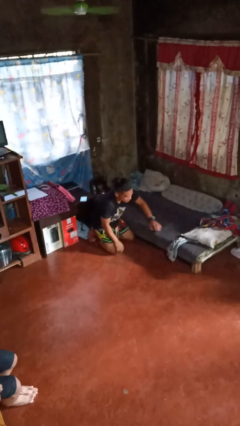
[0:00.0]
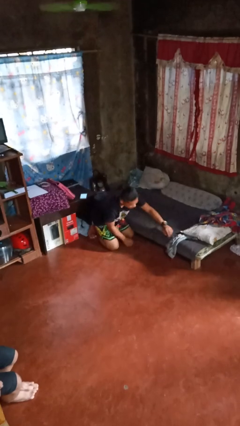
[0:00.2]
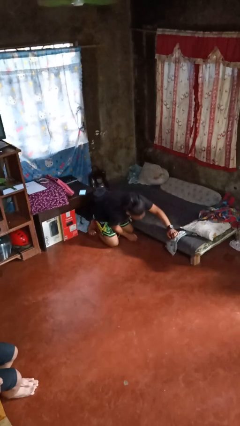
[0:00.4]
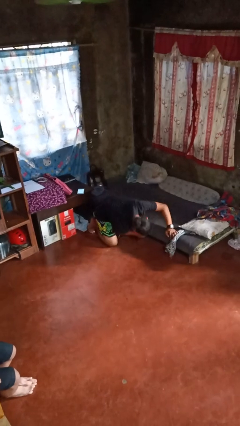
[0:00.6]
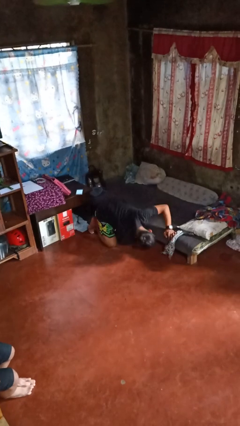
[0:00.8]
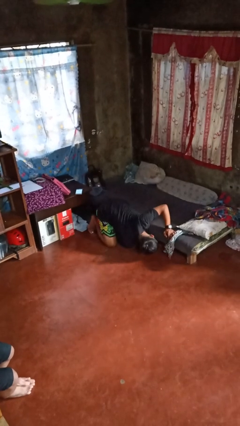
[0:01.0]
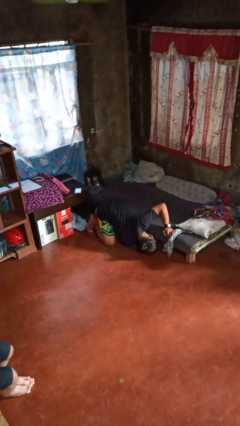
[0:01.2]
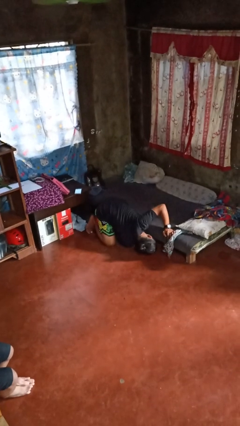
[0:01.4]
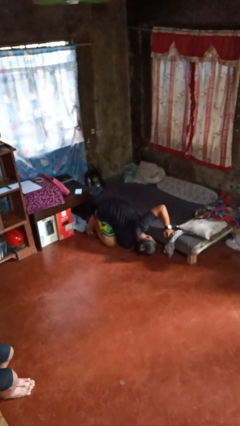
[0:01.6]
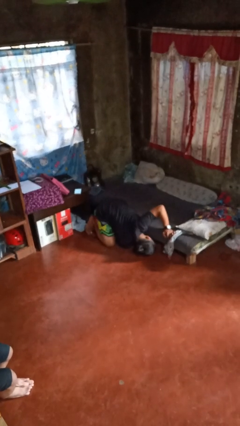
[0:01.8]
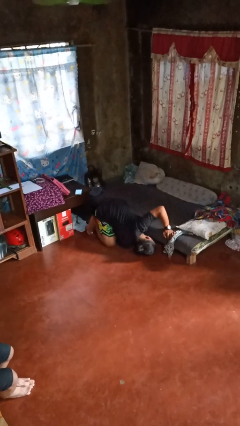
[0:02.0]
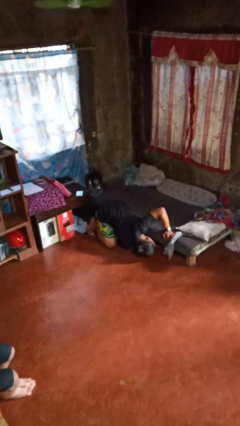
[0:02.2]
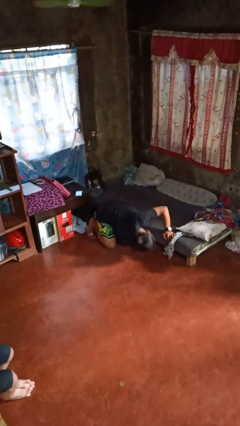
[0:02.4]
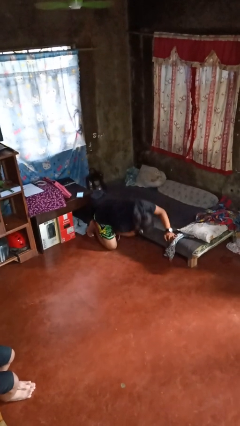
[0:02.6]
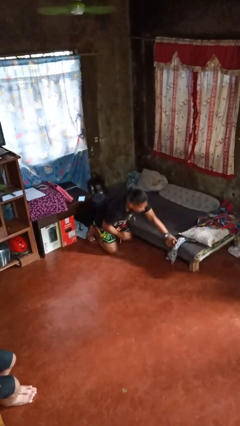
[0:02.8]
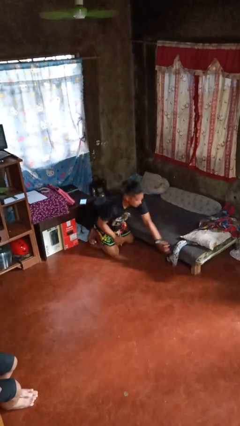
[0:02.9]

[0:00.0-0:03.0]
person searches under bed

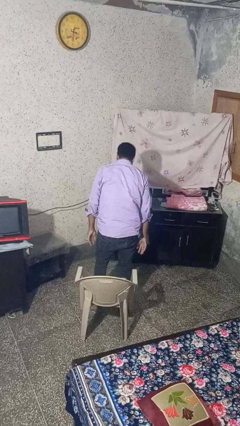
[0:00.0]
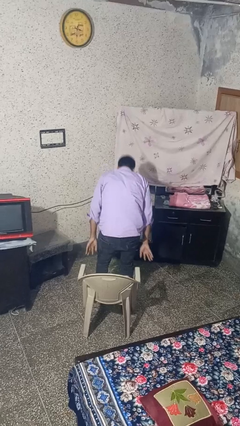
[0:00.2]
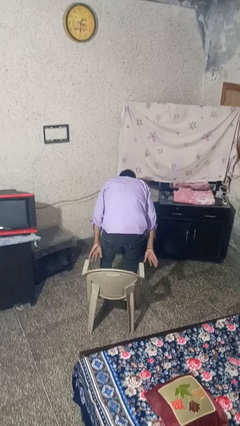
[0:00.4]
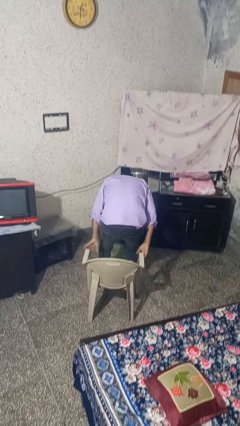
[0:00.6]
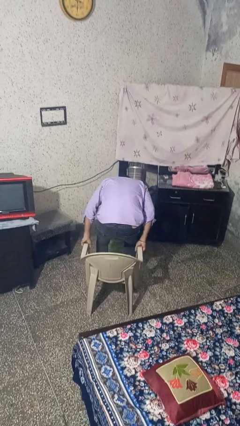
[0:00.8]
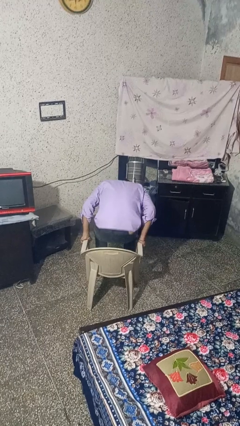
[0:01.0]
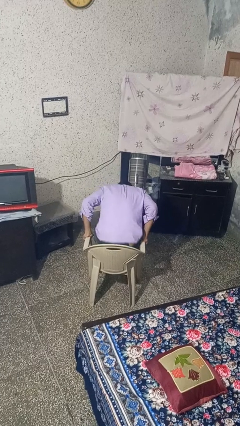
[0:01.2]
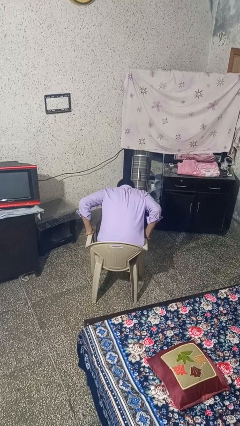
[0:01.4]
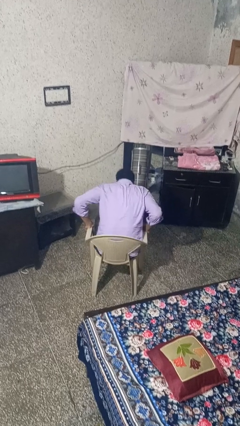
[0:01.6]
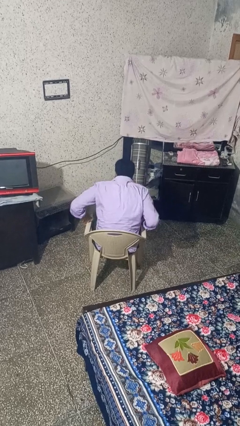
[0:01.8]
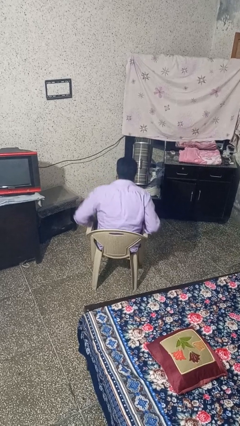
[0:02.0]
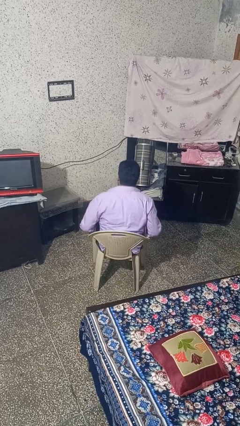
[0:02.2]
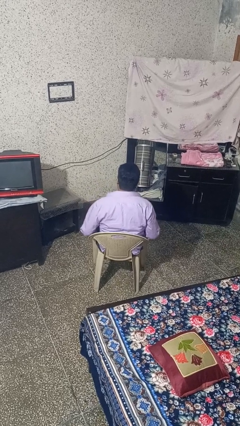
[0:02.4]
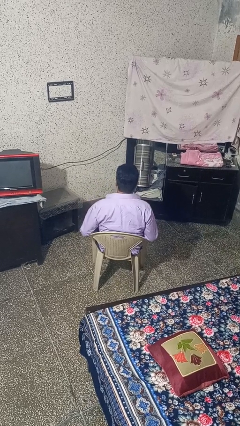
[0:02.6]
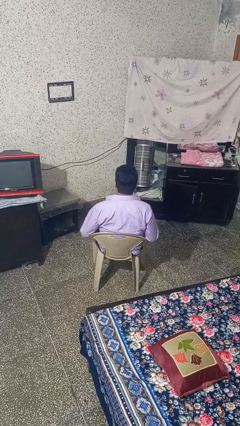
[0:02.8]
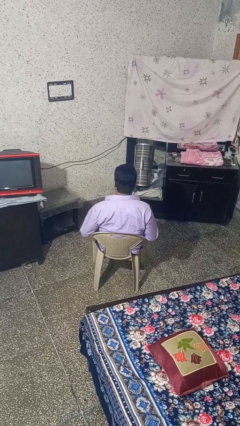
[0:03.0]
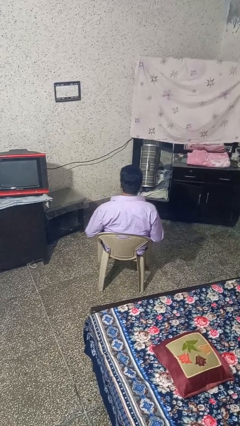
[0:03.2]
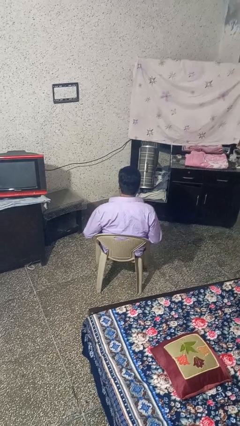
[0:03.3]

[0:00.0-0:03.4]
person sits down

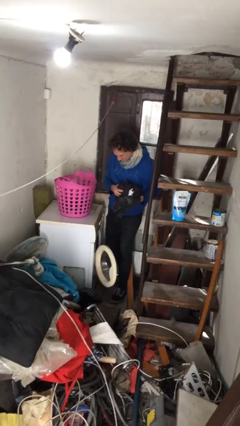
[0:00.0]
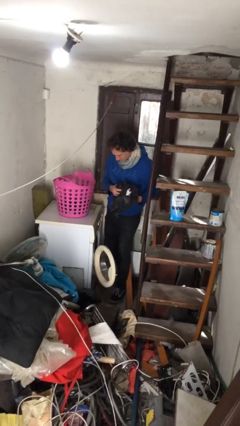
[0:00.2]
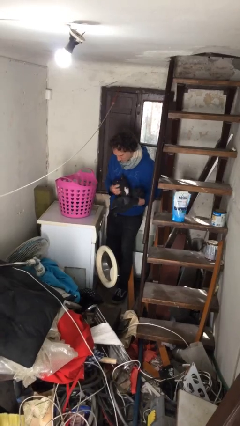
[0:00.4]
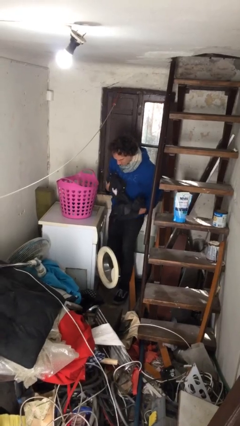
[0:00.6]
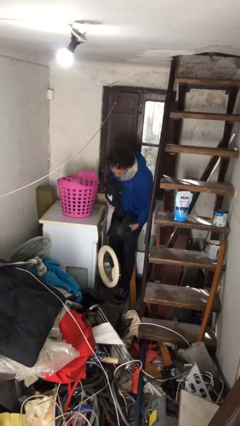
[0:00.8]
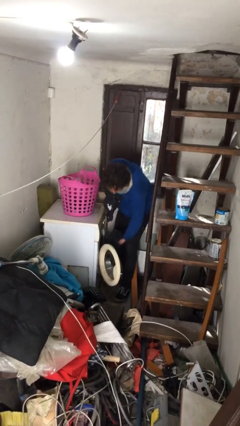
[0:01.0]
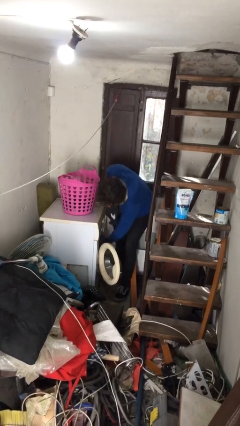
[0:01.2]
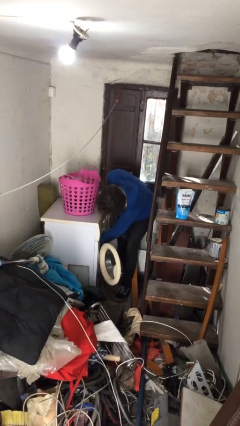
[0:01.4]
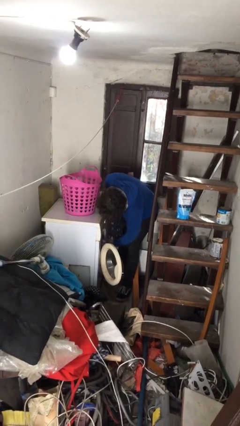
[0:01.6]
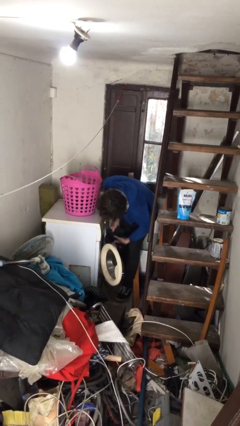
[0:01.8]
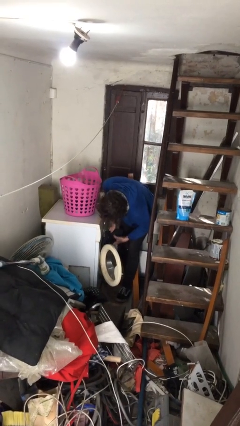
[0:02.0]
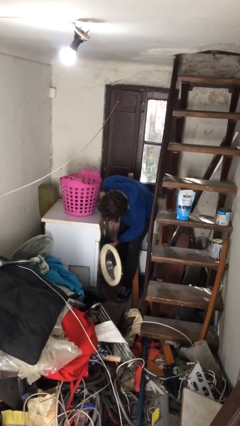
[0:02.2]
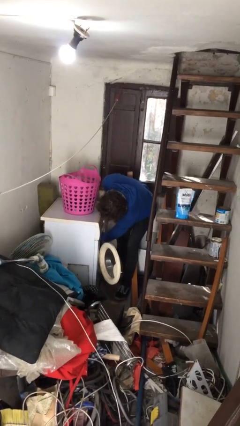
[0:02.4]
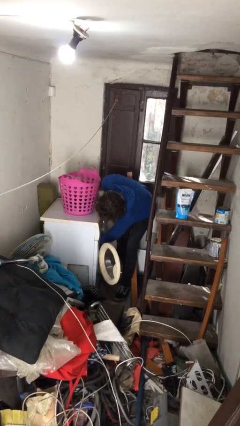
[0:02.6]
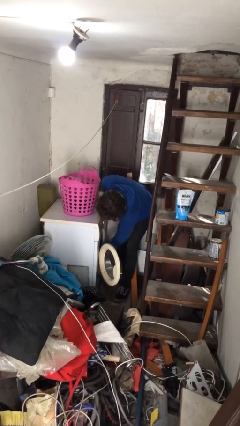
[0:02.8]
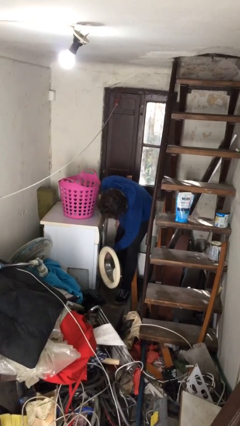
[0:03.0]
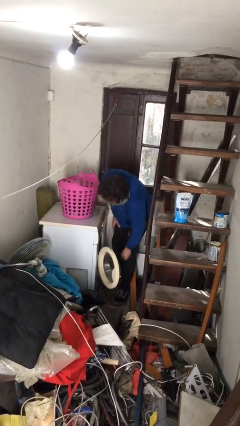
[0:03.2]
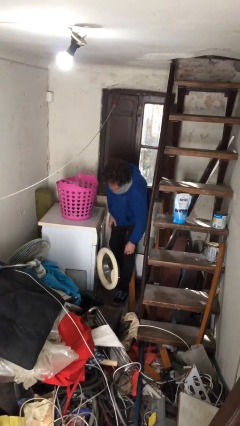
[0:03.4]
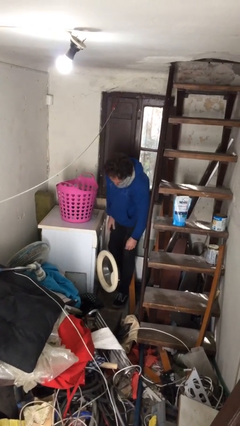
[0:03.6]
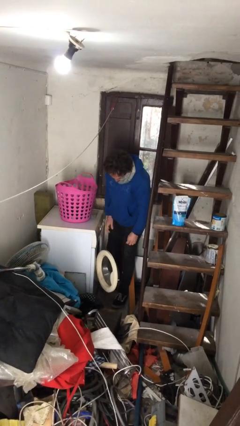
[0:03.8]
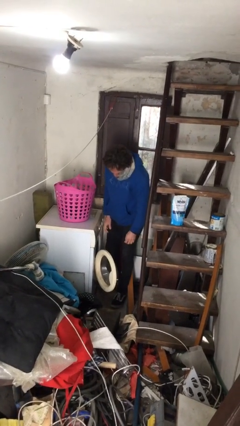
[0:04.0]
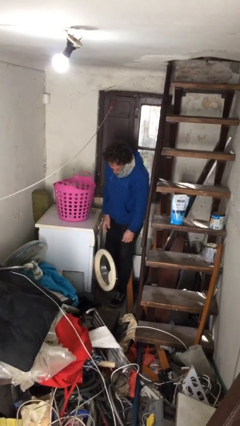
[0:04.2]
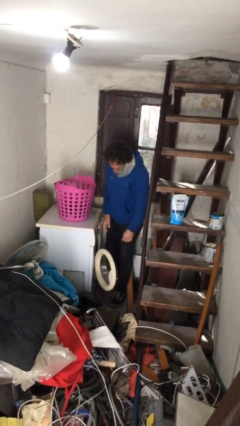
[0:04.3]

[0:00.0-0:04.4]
person loads clotheswasher

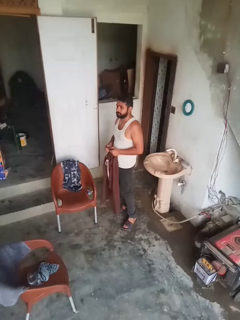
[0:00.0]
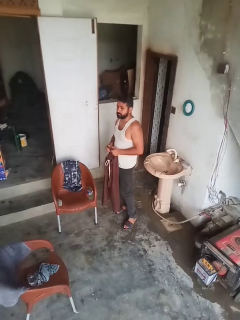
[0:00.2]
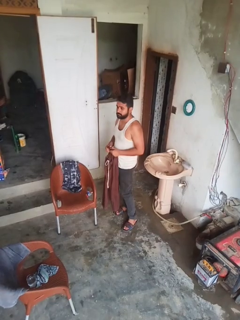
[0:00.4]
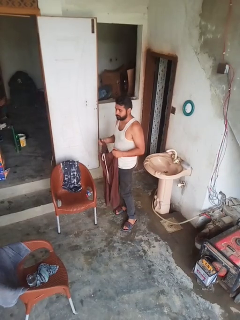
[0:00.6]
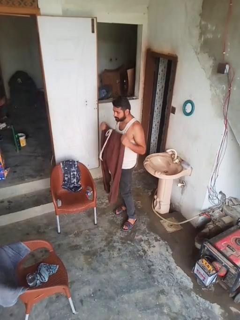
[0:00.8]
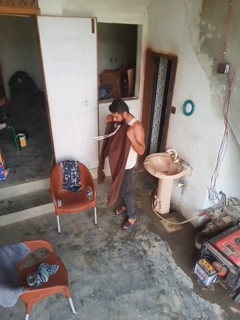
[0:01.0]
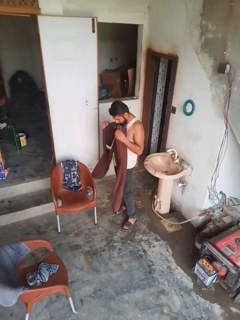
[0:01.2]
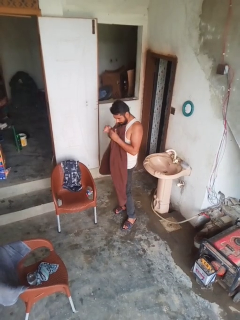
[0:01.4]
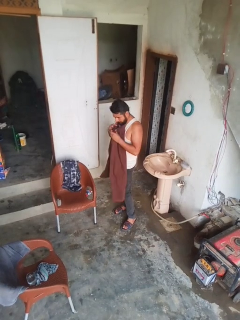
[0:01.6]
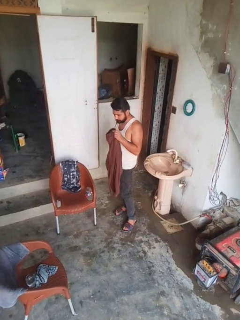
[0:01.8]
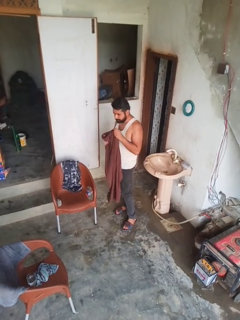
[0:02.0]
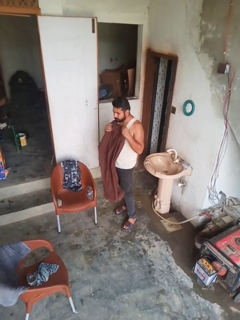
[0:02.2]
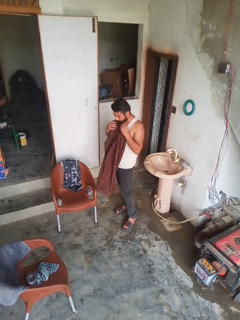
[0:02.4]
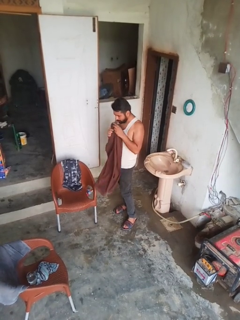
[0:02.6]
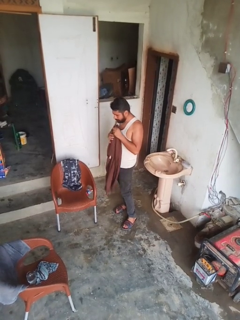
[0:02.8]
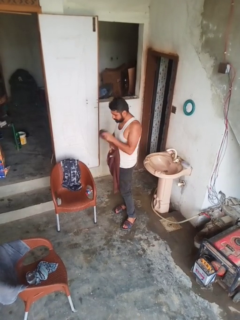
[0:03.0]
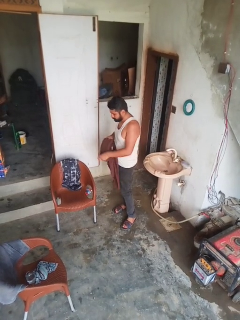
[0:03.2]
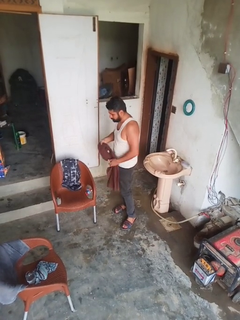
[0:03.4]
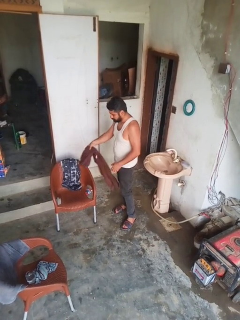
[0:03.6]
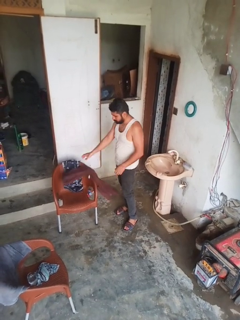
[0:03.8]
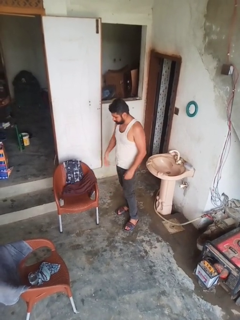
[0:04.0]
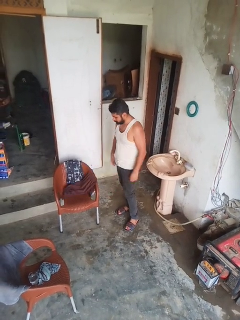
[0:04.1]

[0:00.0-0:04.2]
person folds pants

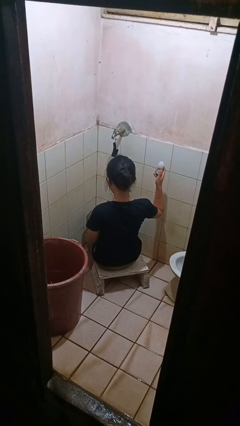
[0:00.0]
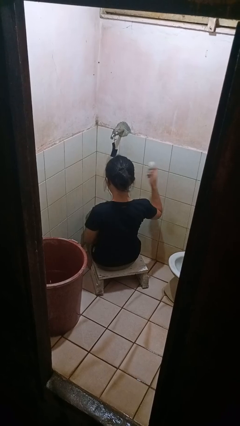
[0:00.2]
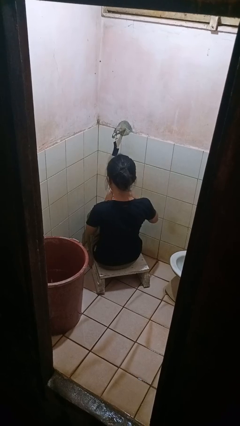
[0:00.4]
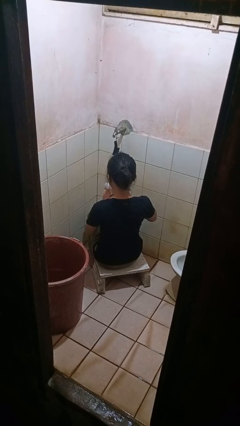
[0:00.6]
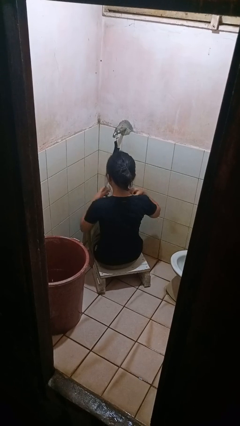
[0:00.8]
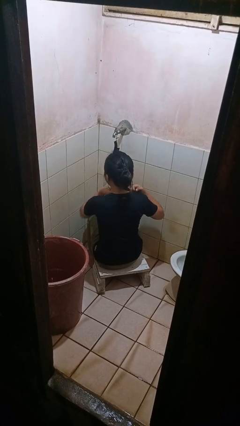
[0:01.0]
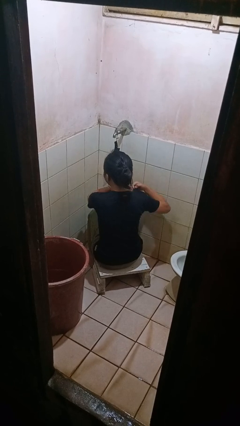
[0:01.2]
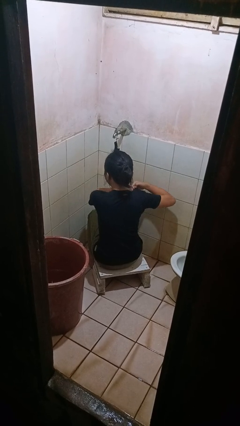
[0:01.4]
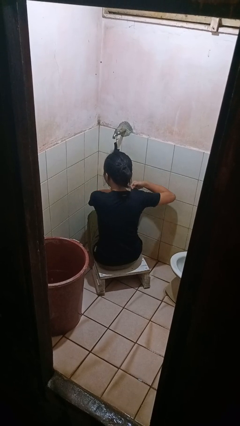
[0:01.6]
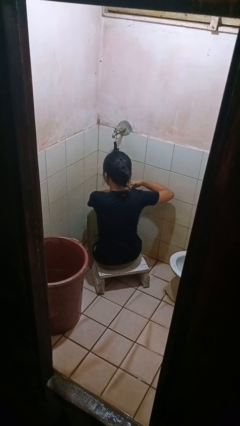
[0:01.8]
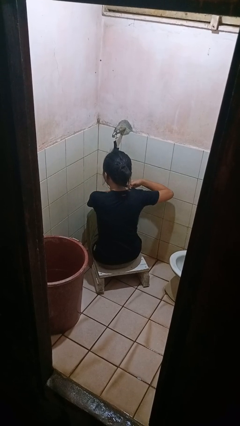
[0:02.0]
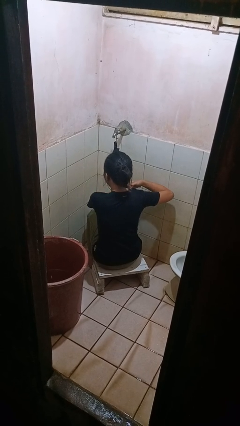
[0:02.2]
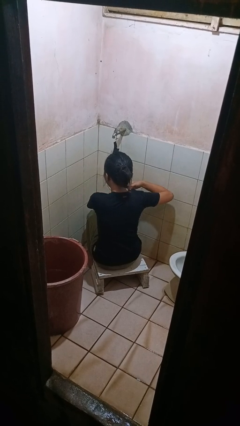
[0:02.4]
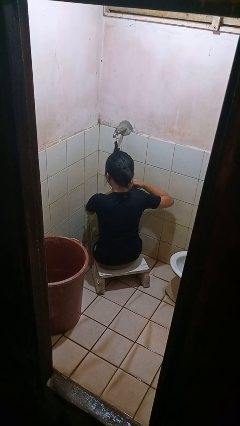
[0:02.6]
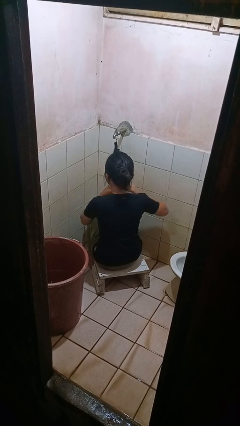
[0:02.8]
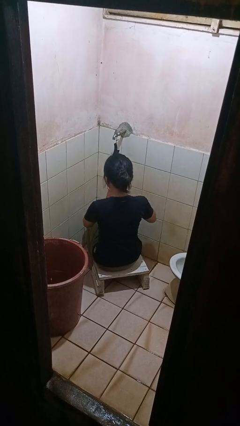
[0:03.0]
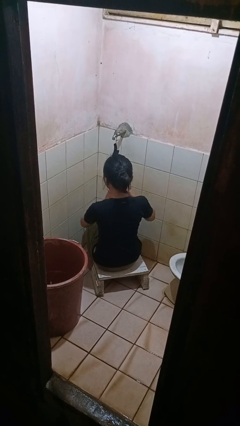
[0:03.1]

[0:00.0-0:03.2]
person applies deodorant

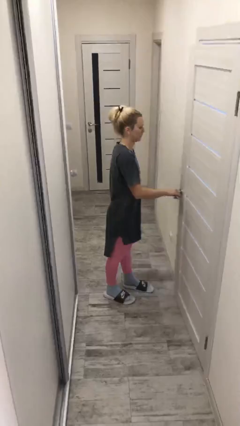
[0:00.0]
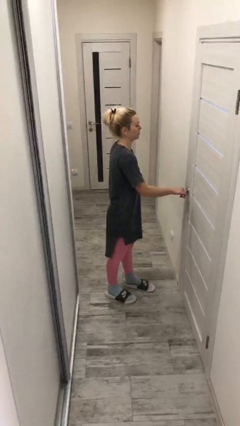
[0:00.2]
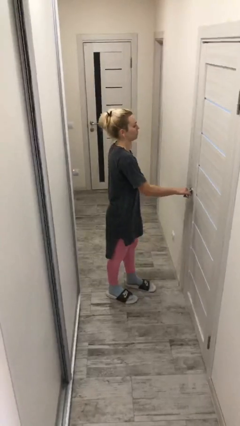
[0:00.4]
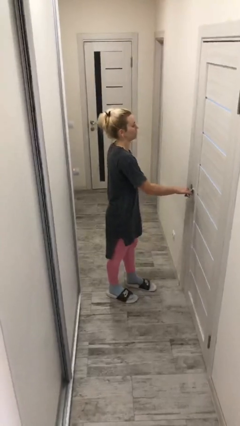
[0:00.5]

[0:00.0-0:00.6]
person closes facility door
